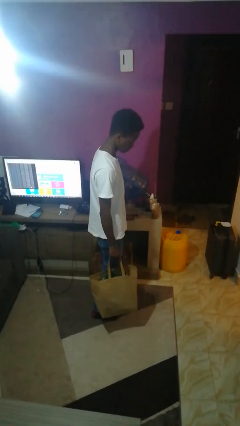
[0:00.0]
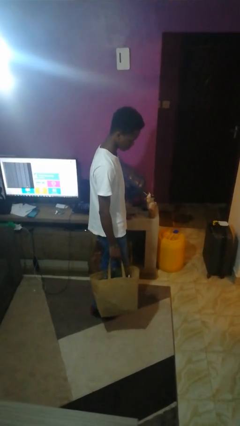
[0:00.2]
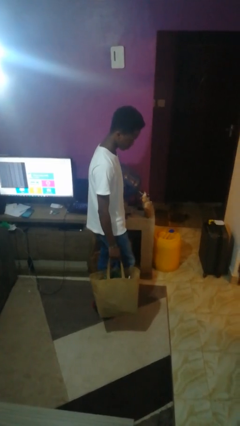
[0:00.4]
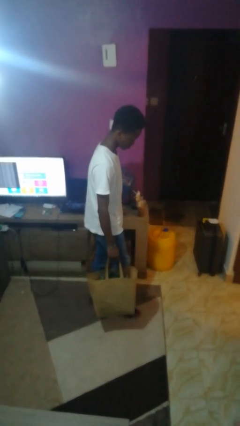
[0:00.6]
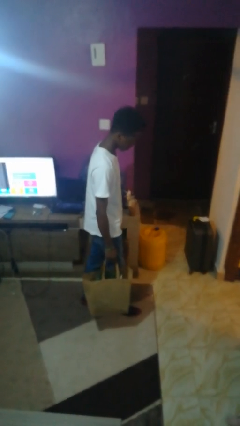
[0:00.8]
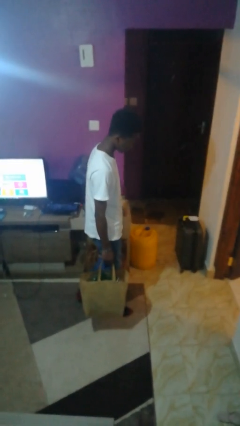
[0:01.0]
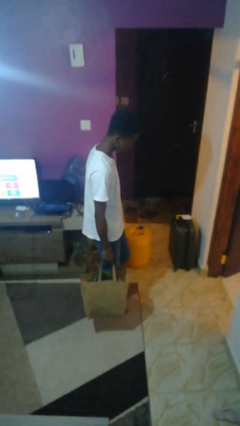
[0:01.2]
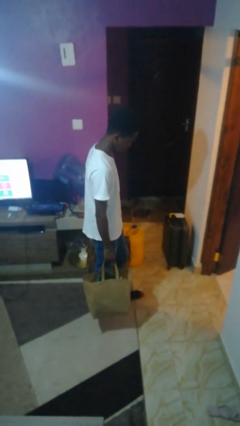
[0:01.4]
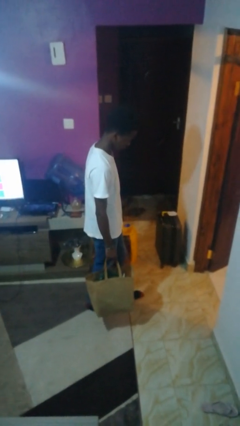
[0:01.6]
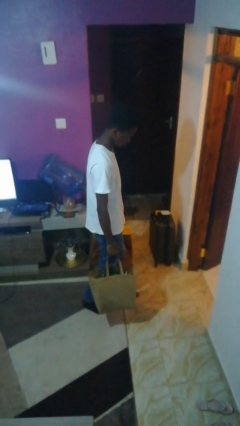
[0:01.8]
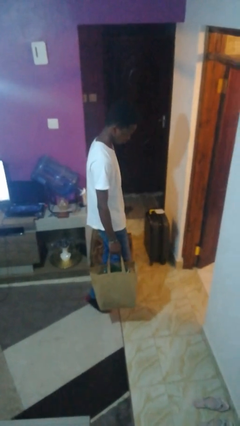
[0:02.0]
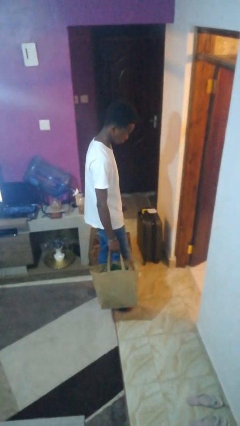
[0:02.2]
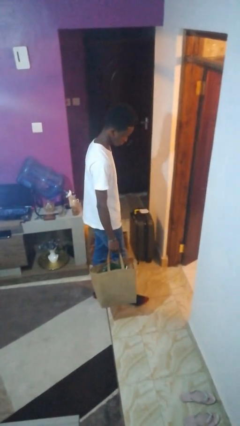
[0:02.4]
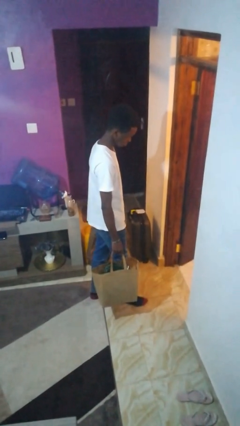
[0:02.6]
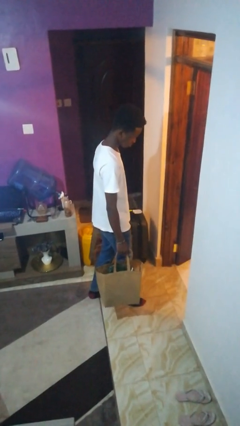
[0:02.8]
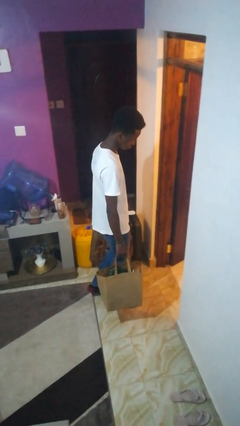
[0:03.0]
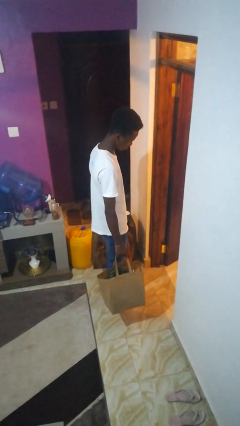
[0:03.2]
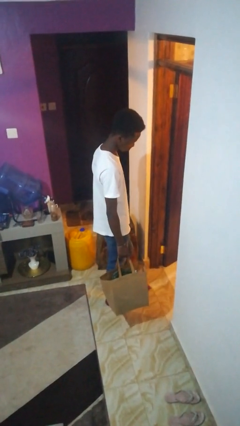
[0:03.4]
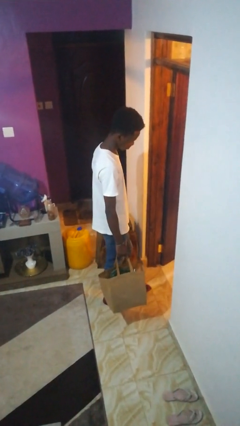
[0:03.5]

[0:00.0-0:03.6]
person carries groceries

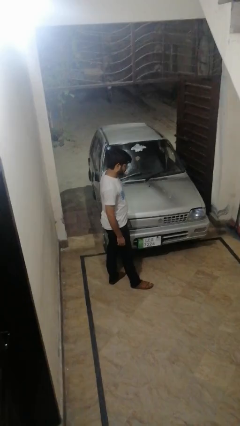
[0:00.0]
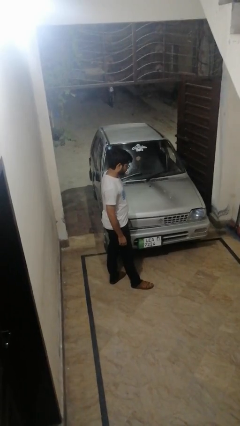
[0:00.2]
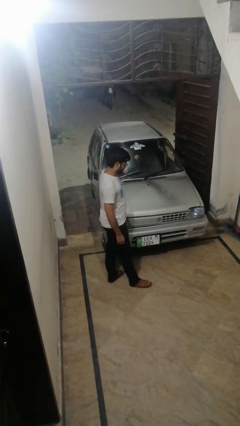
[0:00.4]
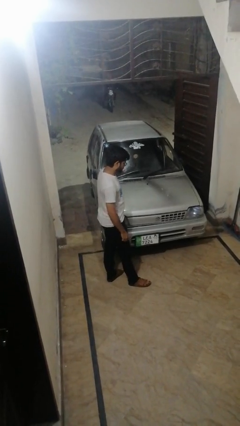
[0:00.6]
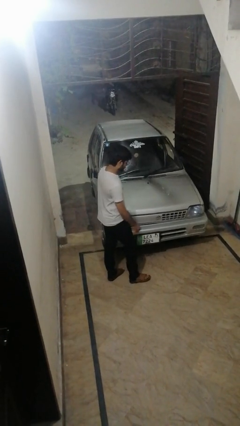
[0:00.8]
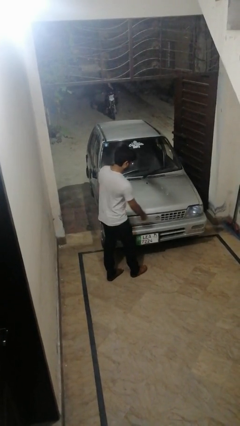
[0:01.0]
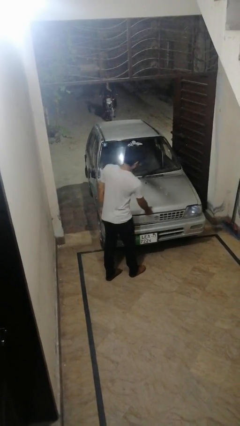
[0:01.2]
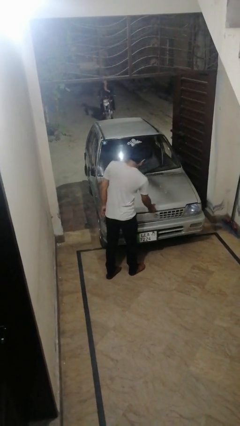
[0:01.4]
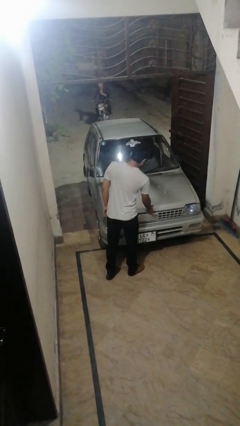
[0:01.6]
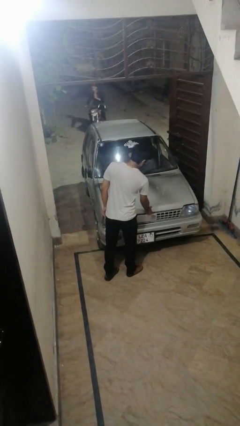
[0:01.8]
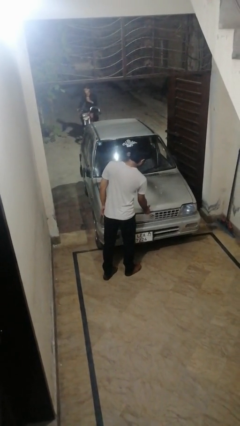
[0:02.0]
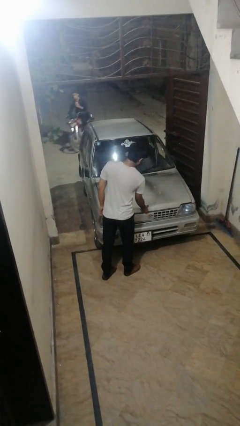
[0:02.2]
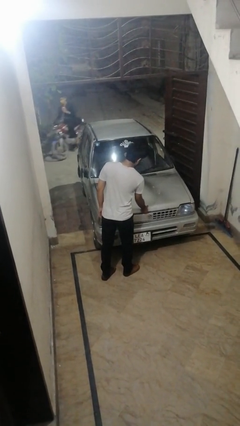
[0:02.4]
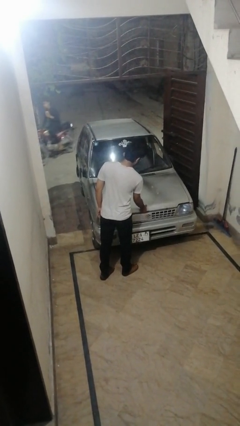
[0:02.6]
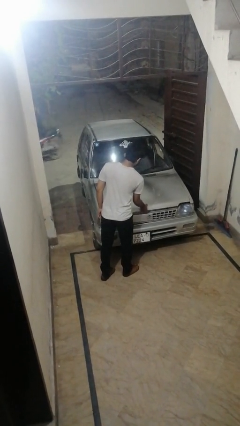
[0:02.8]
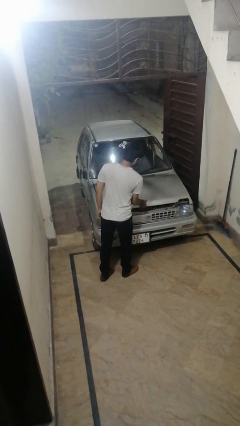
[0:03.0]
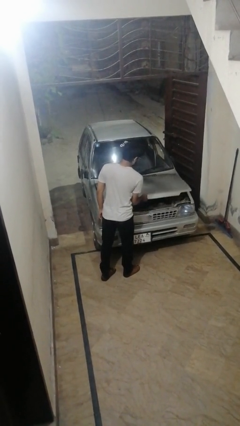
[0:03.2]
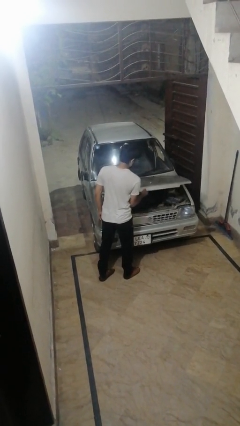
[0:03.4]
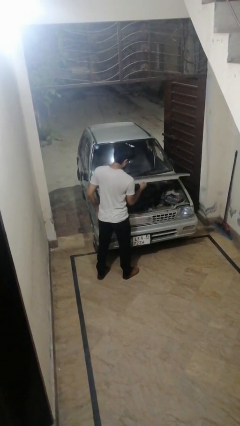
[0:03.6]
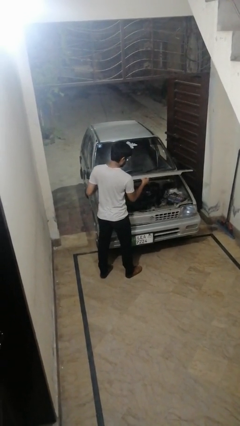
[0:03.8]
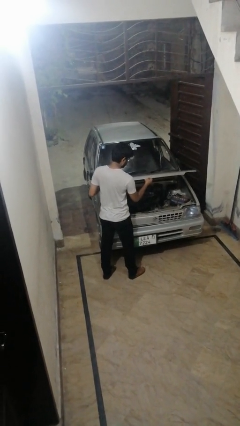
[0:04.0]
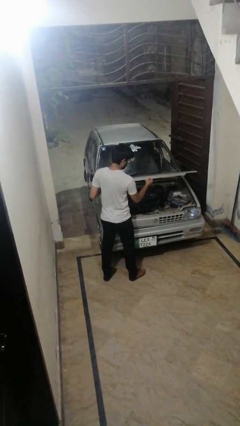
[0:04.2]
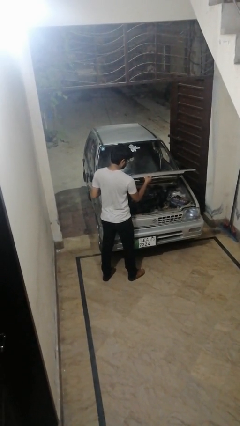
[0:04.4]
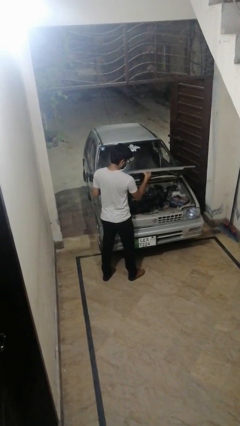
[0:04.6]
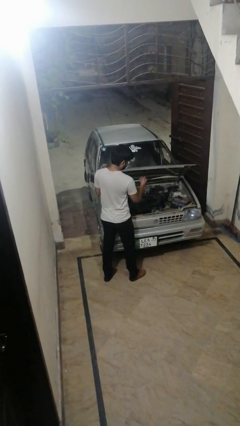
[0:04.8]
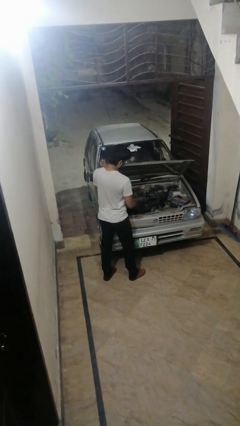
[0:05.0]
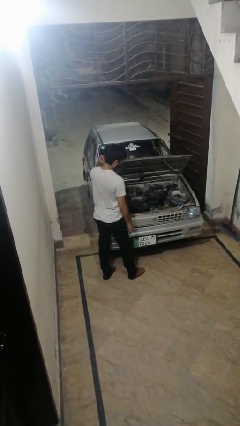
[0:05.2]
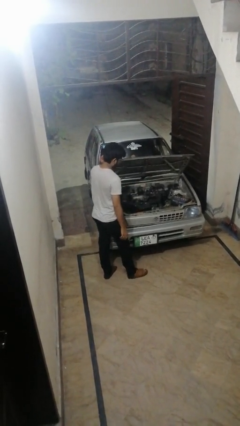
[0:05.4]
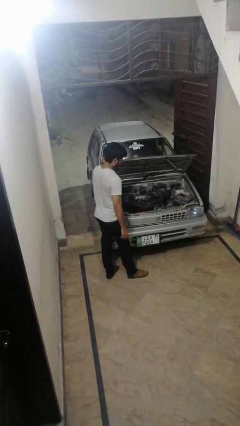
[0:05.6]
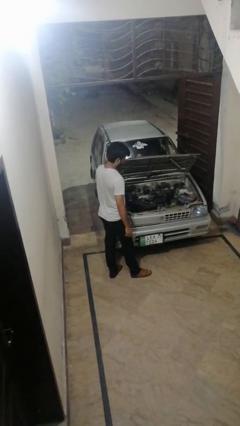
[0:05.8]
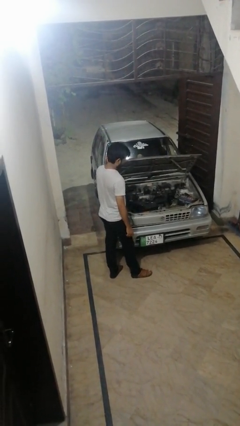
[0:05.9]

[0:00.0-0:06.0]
person opens car hood

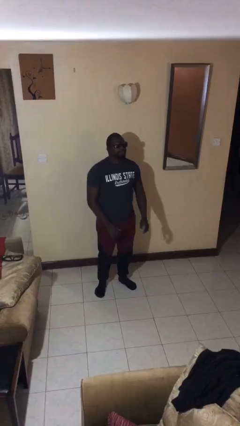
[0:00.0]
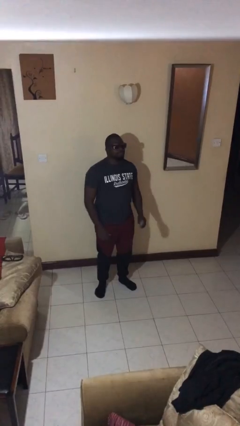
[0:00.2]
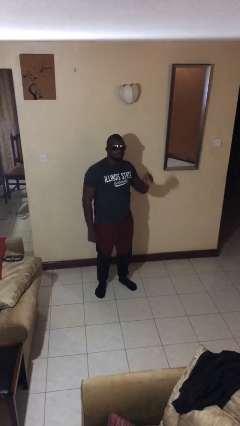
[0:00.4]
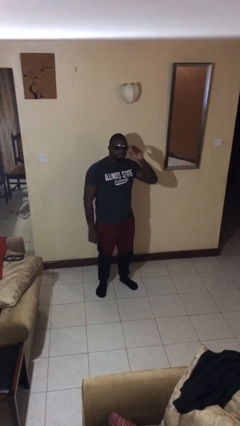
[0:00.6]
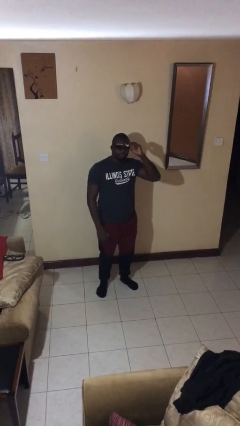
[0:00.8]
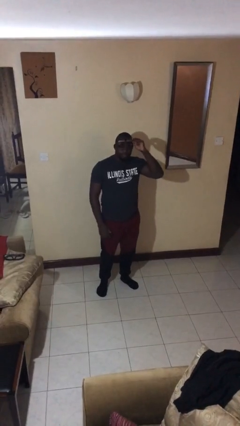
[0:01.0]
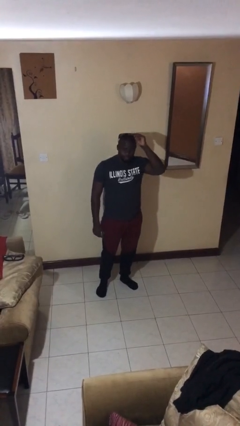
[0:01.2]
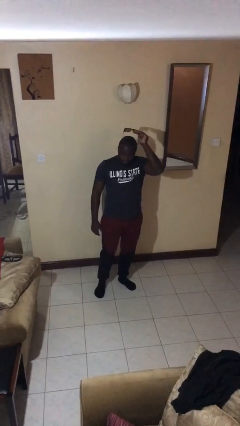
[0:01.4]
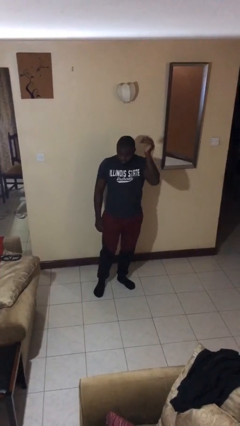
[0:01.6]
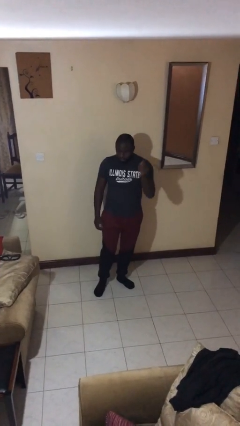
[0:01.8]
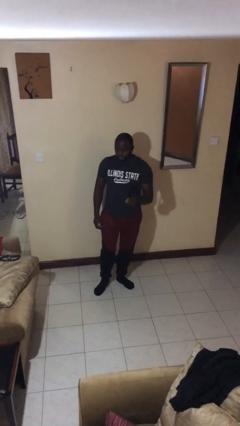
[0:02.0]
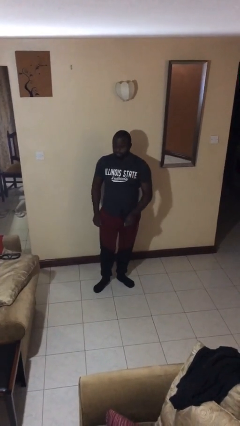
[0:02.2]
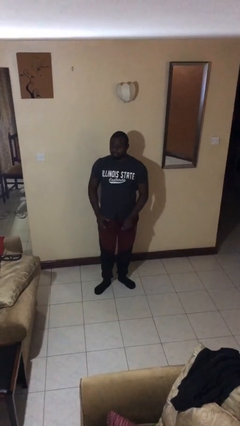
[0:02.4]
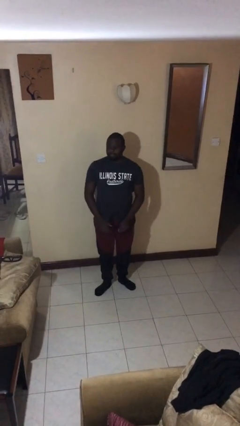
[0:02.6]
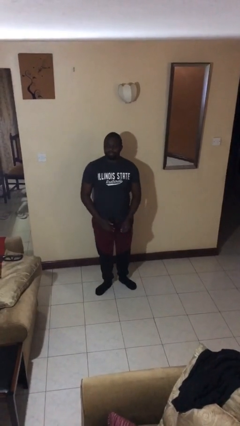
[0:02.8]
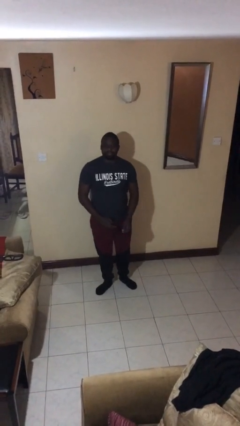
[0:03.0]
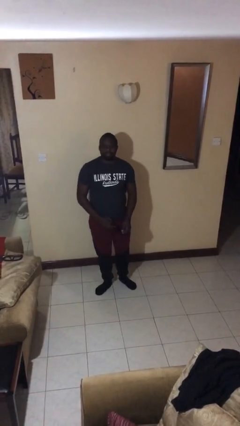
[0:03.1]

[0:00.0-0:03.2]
person takes off sunglasses

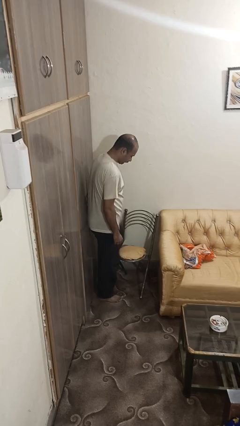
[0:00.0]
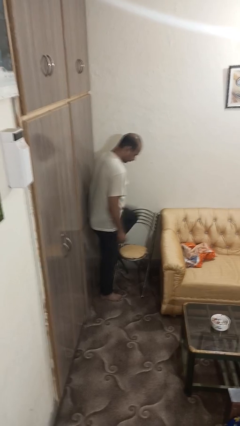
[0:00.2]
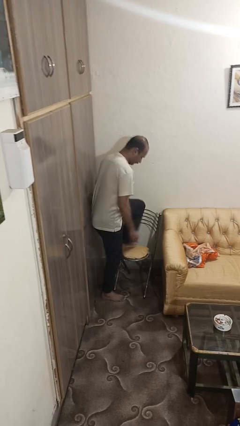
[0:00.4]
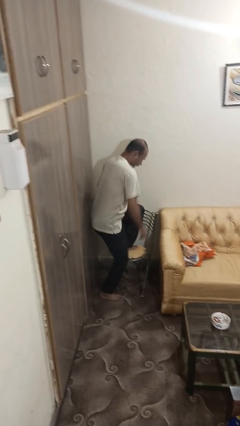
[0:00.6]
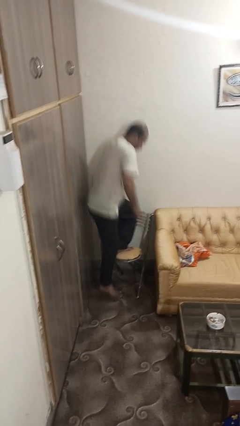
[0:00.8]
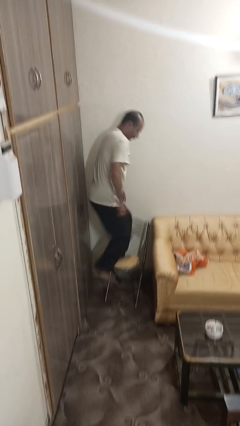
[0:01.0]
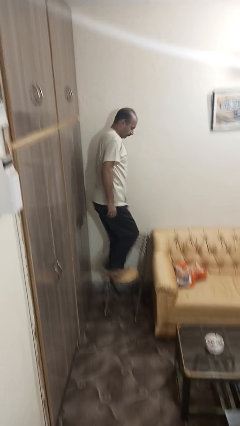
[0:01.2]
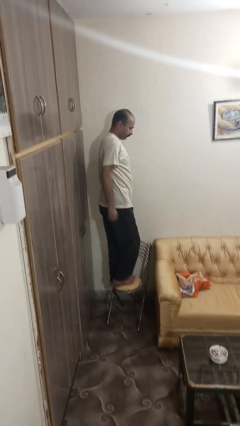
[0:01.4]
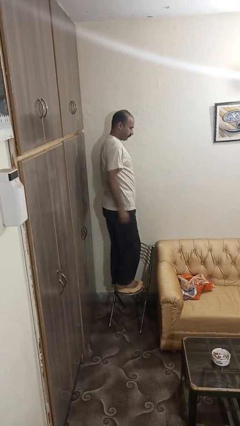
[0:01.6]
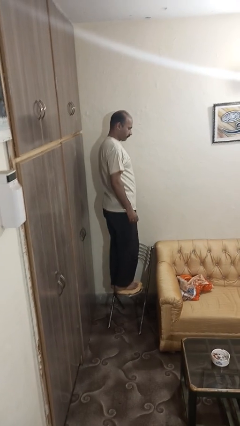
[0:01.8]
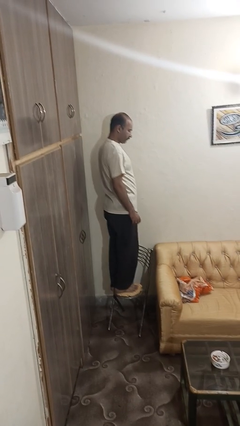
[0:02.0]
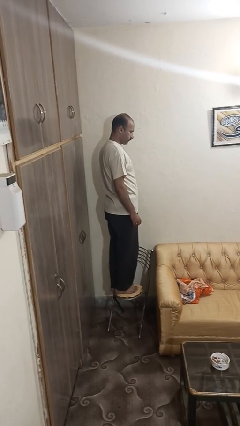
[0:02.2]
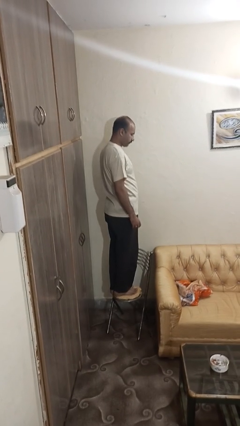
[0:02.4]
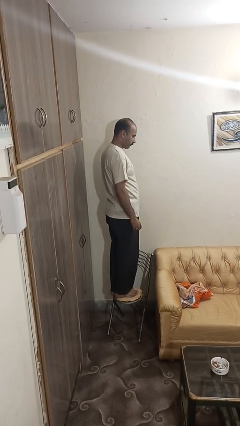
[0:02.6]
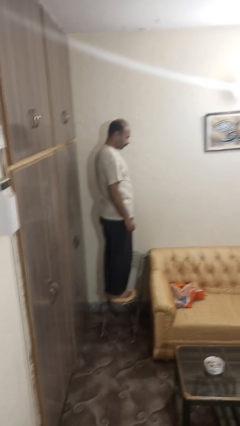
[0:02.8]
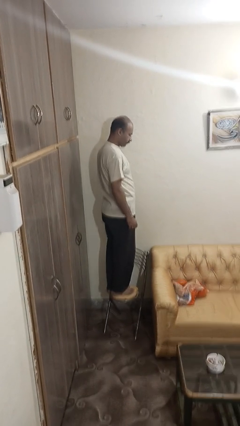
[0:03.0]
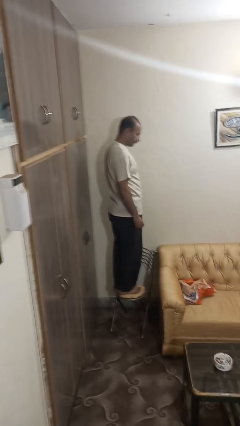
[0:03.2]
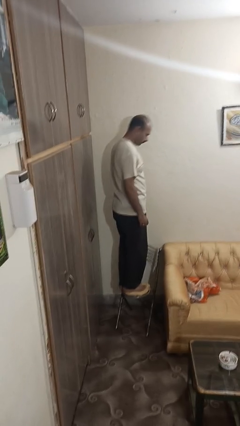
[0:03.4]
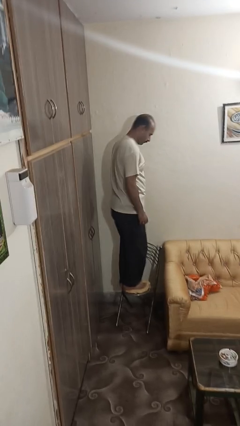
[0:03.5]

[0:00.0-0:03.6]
person climbs on chair

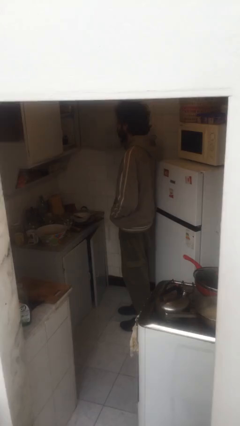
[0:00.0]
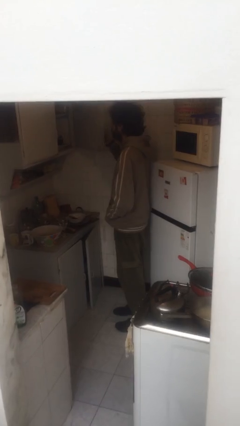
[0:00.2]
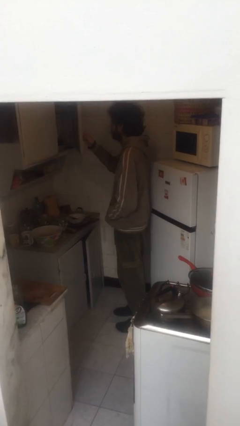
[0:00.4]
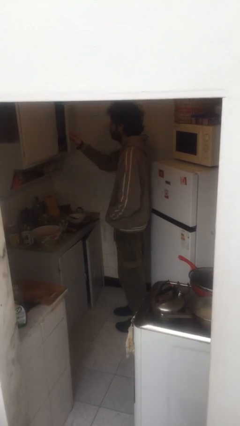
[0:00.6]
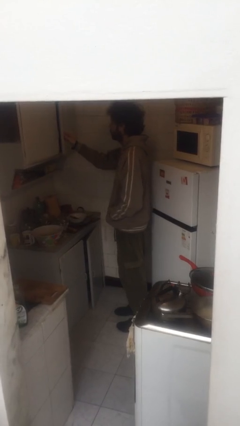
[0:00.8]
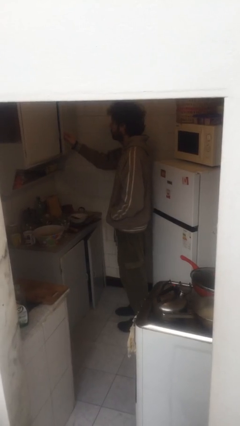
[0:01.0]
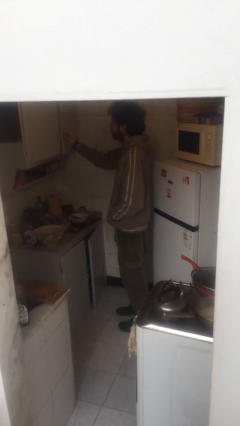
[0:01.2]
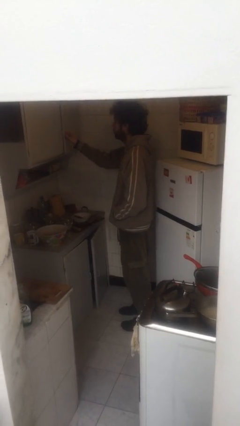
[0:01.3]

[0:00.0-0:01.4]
person closes cabinet
